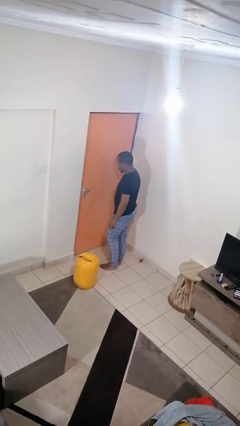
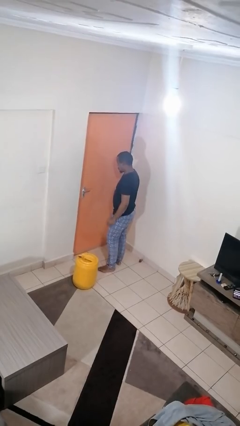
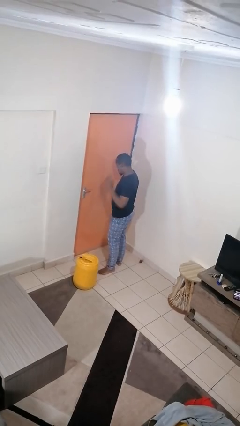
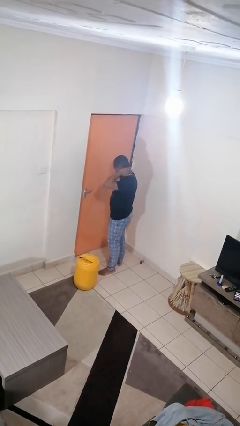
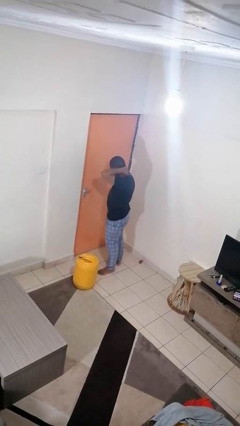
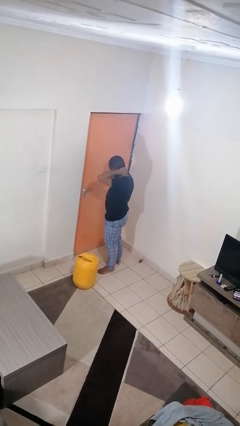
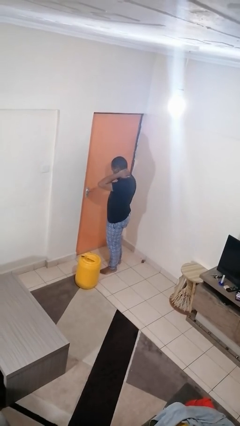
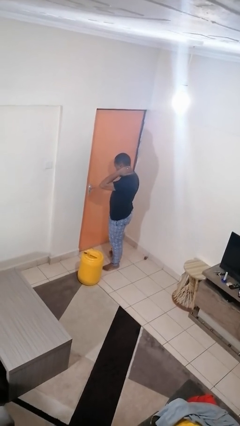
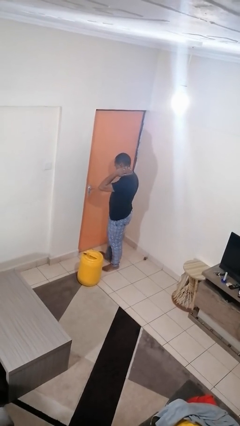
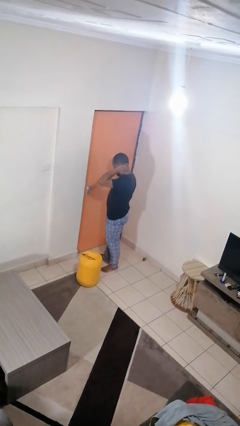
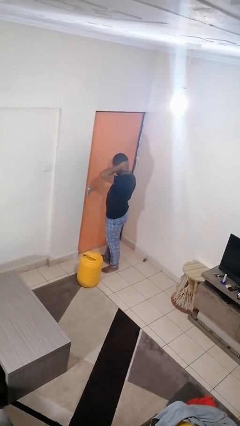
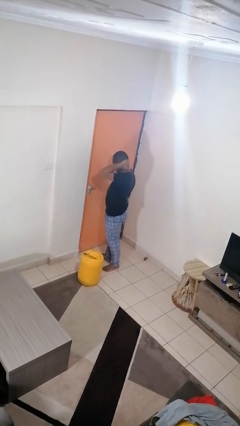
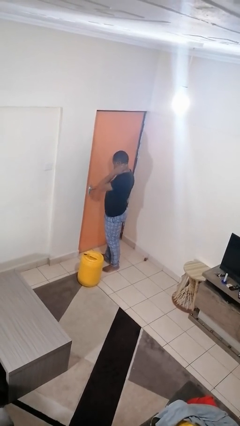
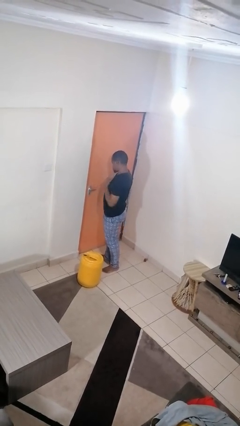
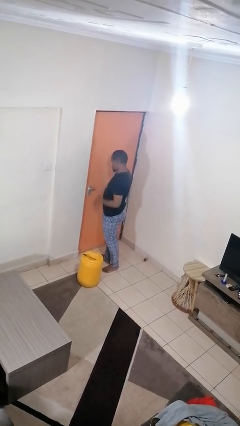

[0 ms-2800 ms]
person rubs neck

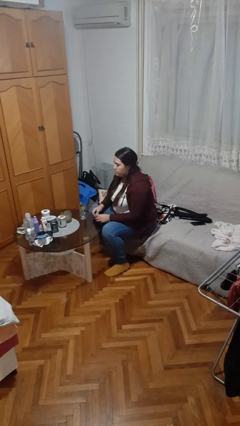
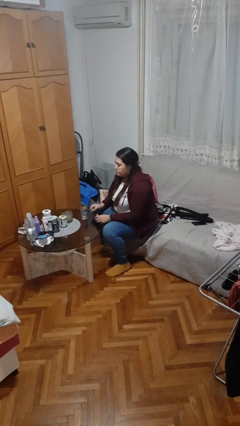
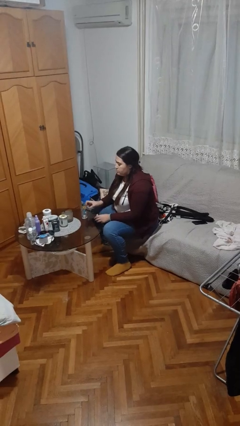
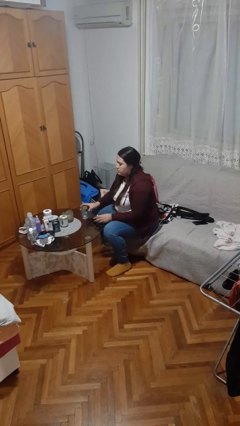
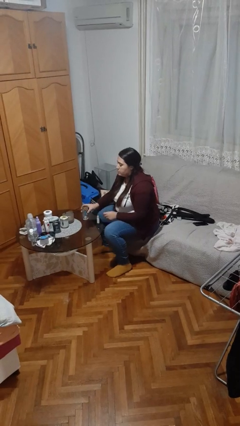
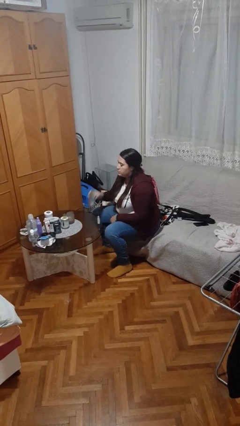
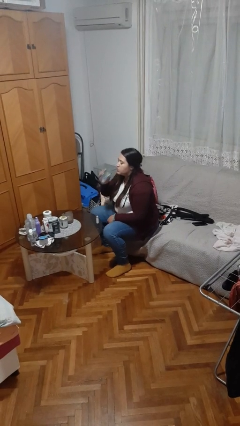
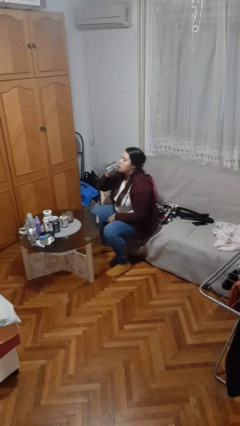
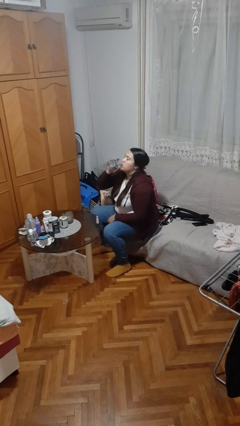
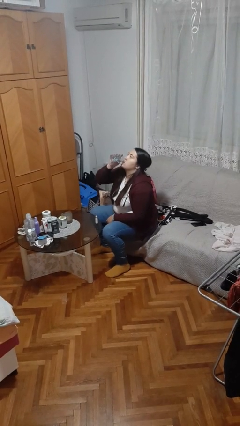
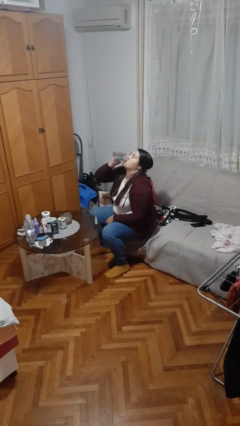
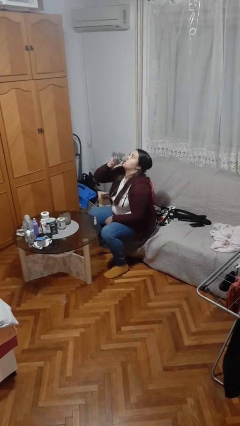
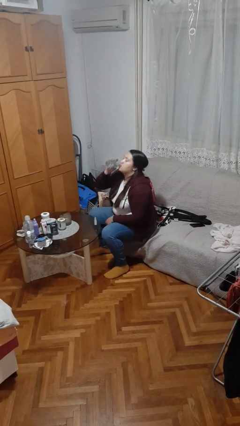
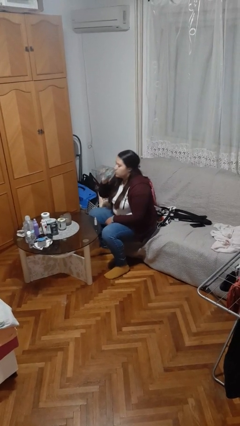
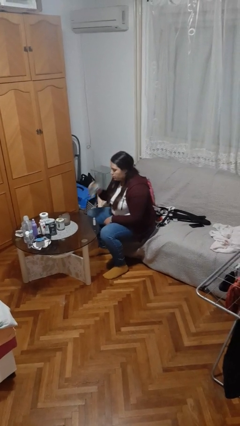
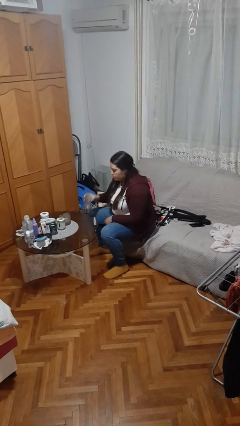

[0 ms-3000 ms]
person drinks from cup

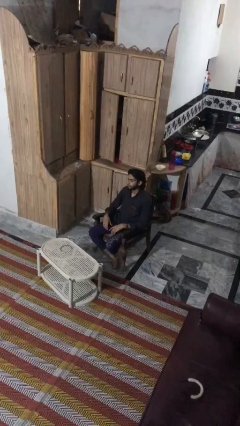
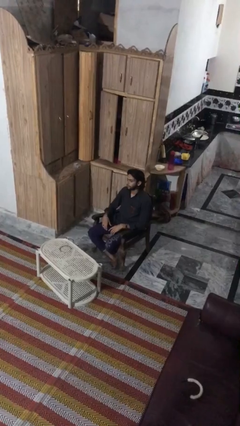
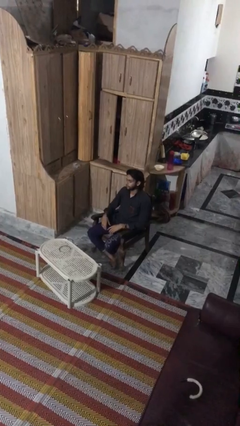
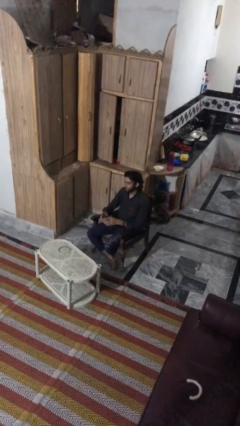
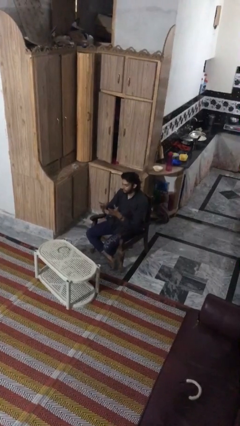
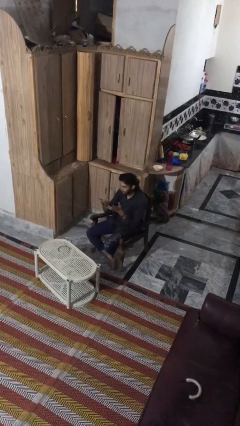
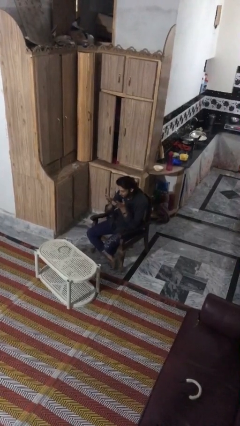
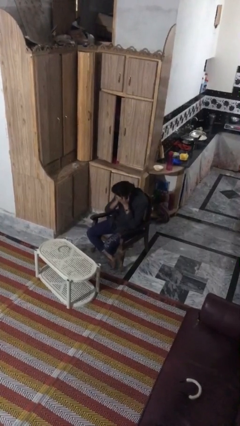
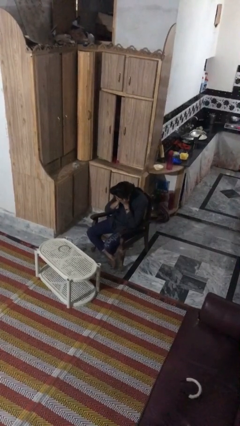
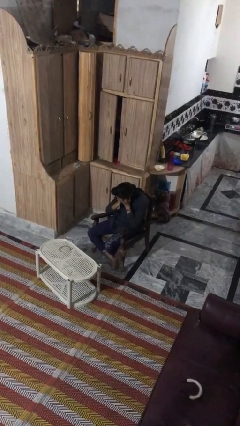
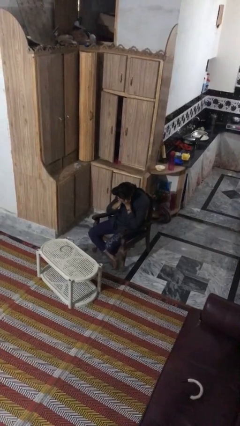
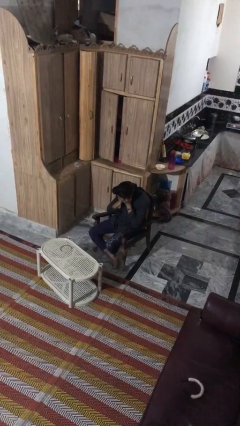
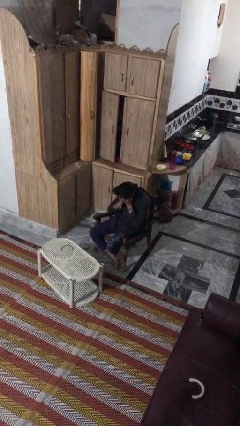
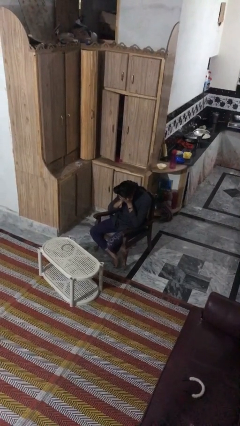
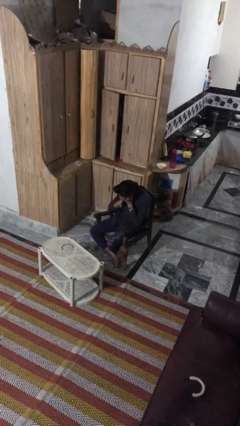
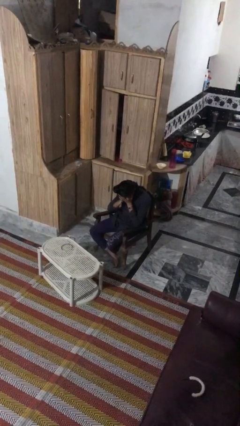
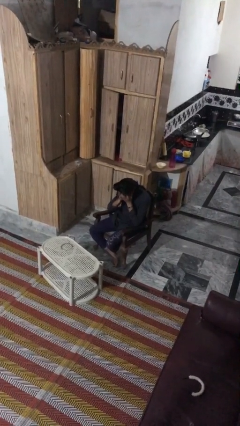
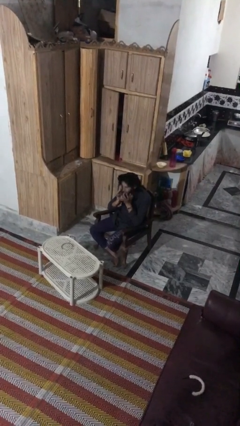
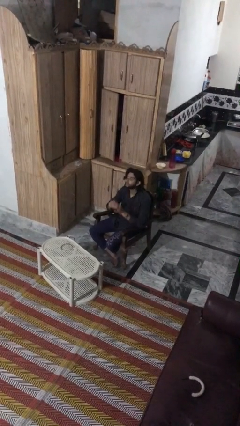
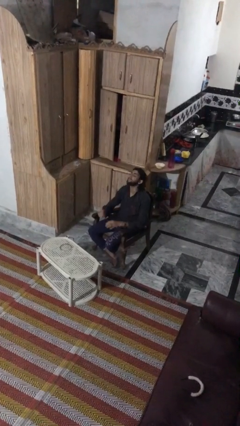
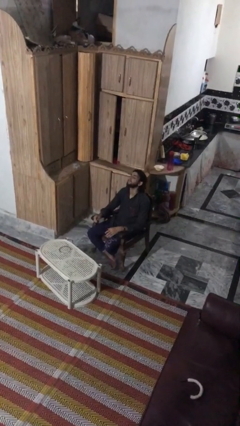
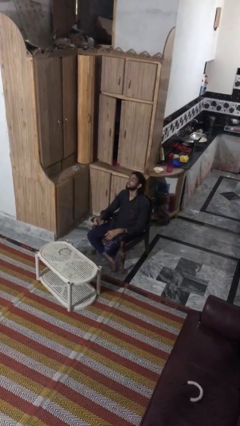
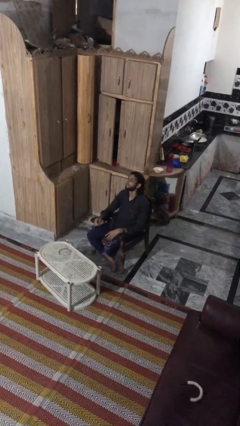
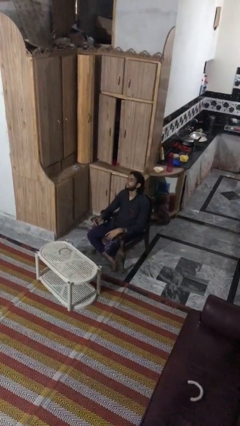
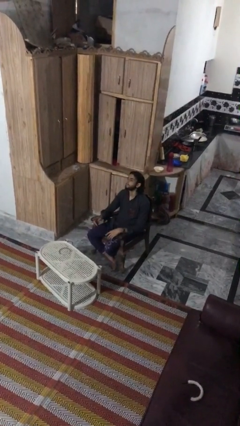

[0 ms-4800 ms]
person covers face with hands

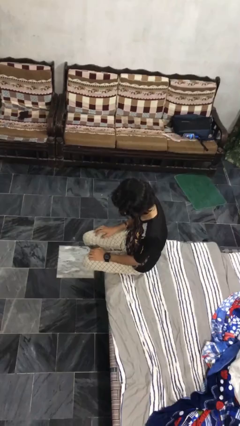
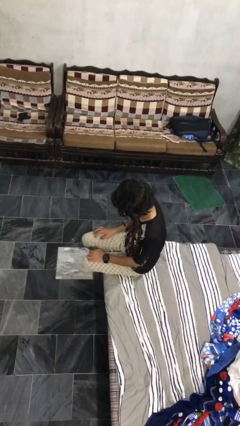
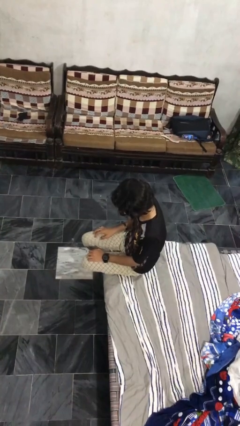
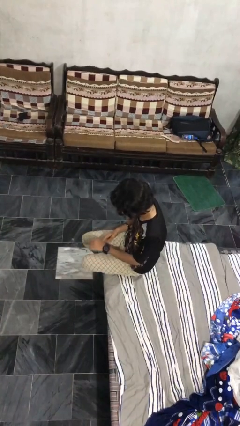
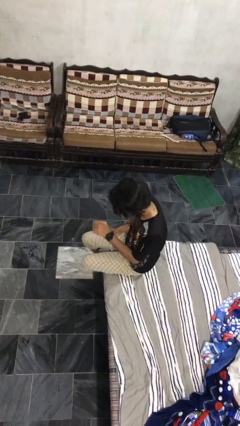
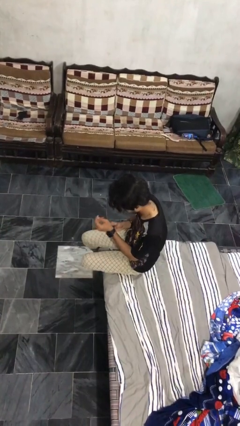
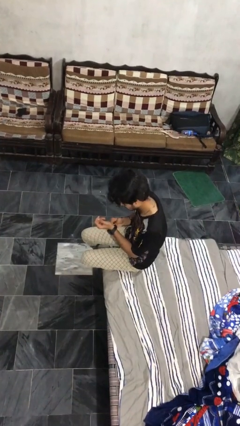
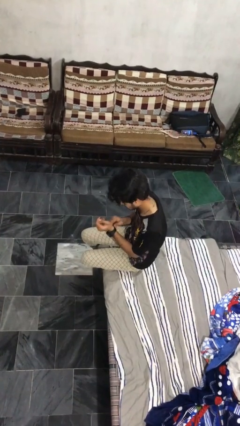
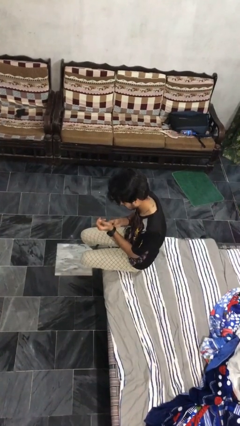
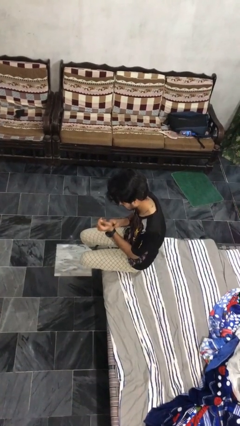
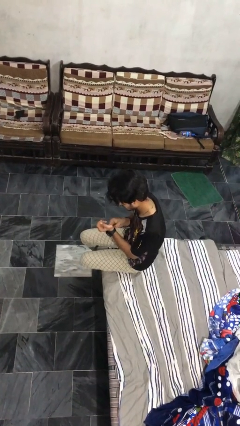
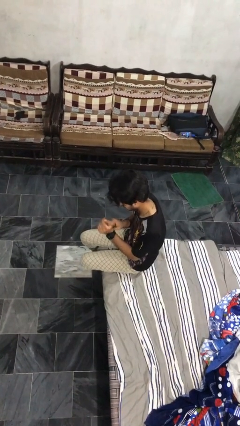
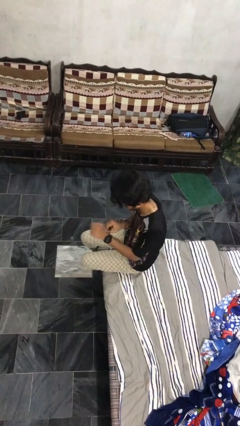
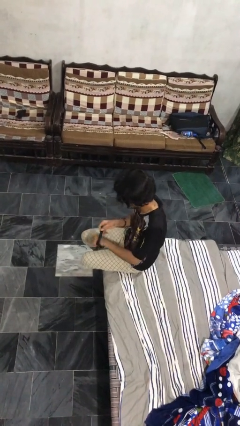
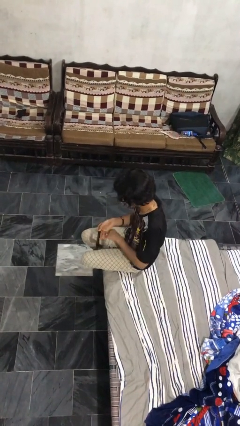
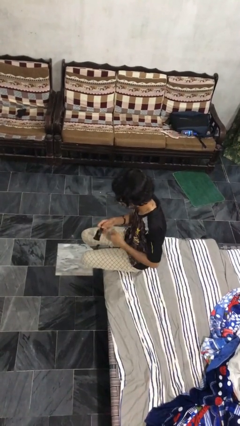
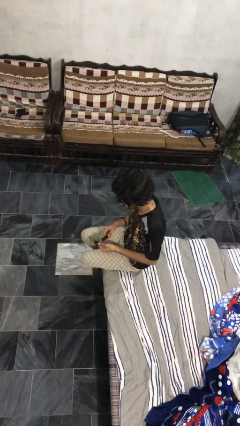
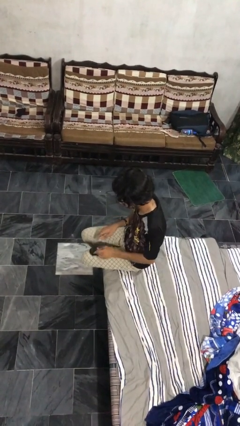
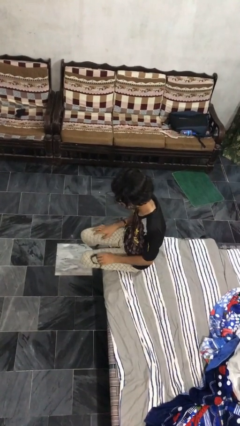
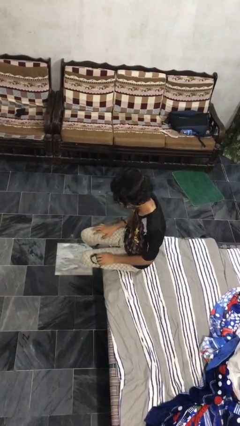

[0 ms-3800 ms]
person takes off wristwatch

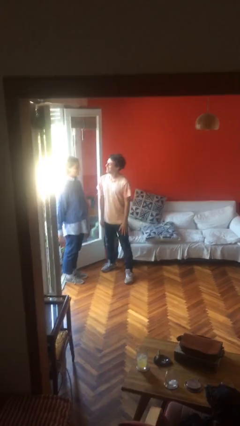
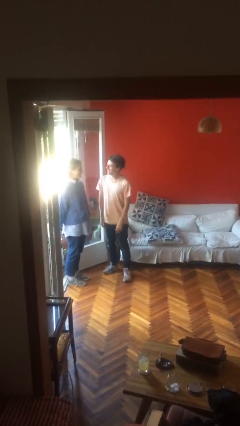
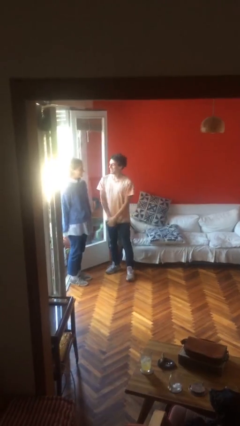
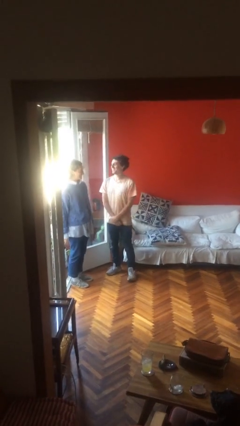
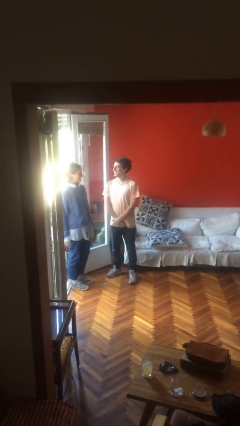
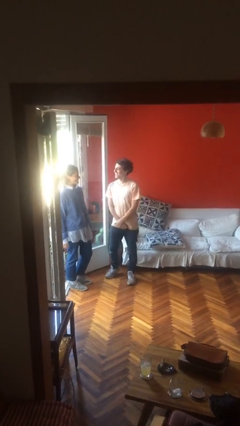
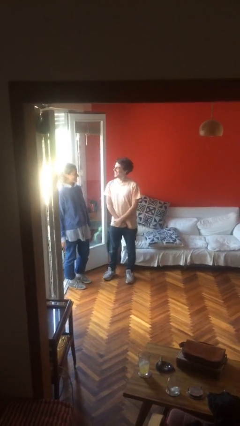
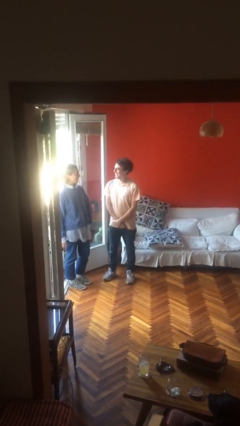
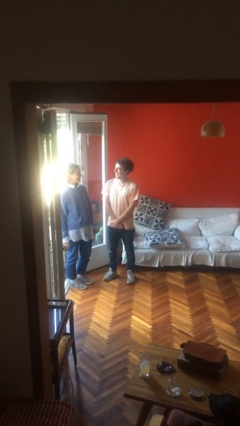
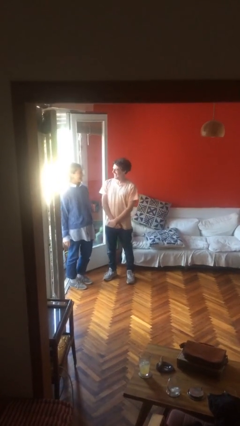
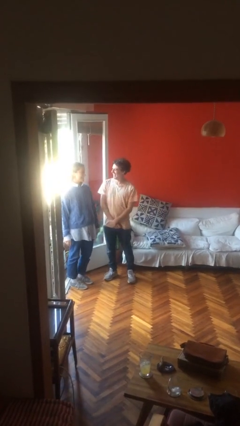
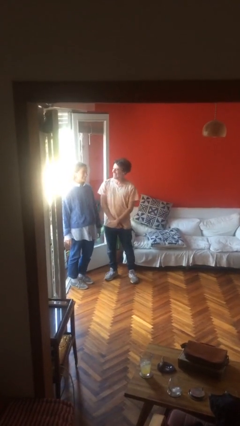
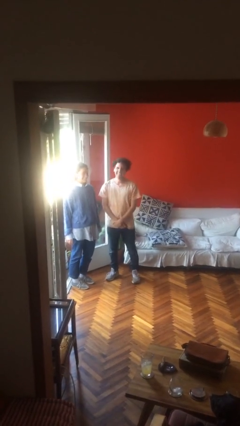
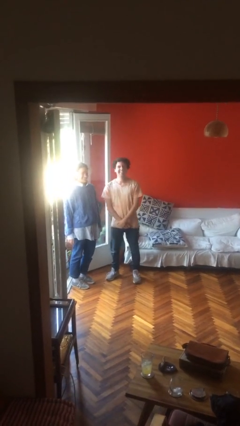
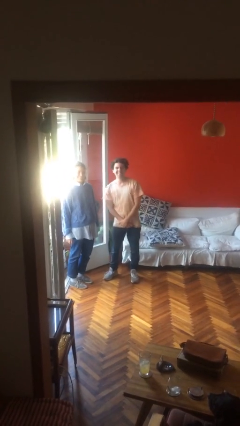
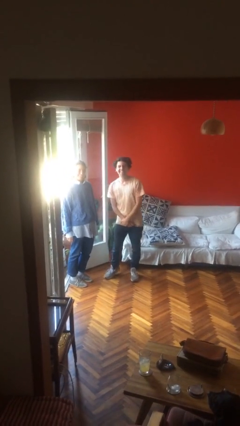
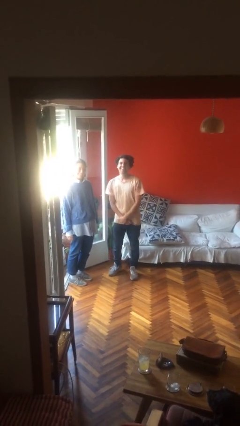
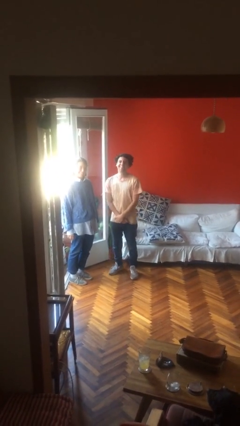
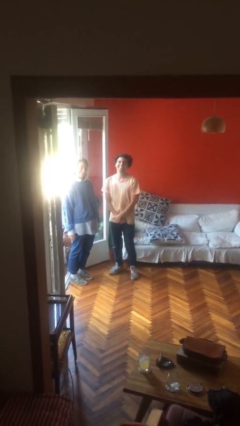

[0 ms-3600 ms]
person talks to person
